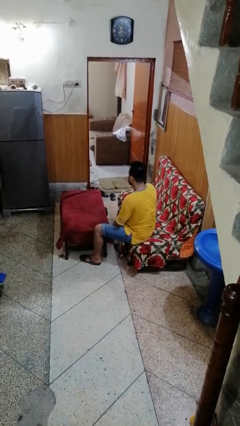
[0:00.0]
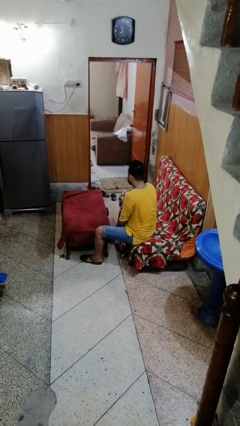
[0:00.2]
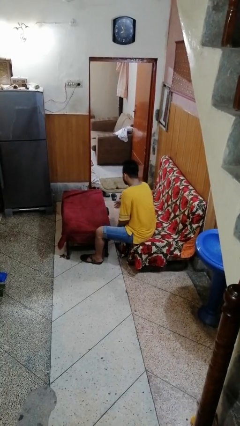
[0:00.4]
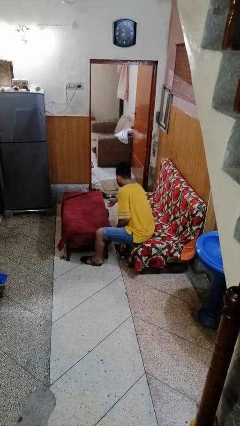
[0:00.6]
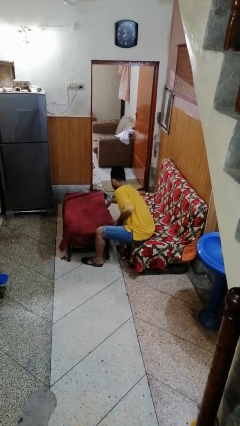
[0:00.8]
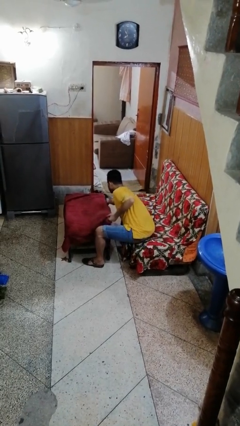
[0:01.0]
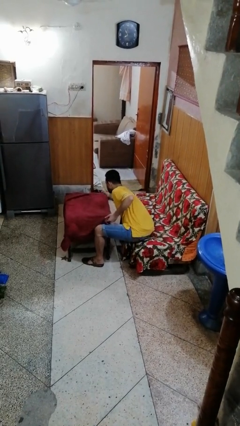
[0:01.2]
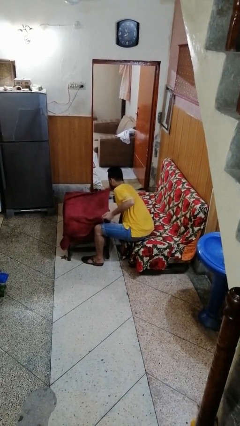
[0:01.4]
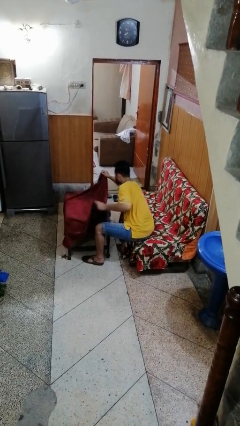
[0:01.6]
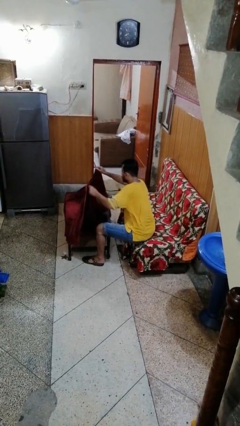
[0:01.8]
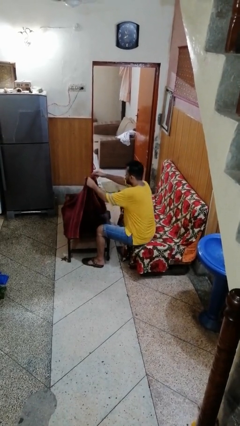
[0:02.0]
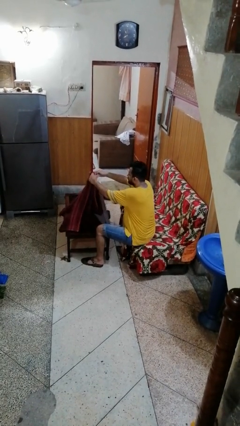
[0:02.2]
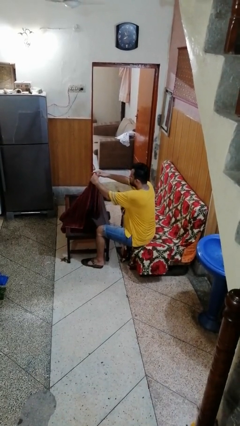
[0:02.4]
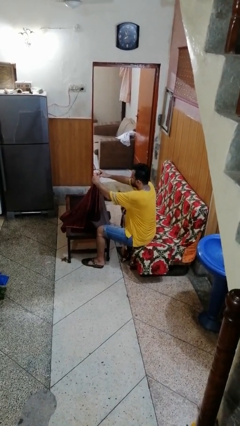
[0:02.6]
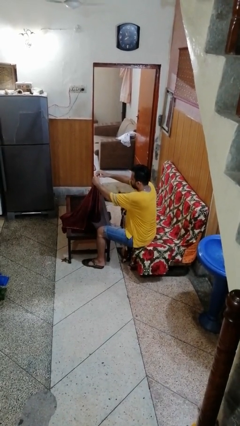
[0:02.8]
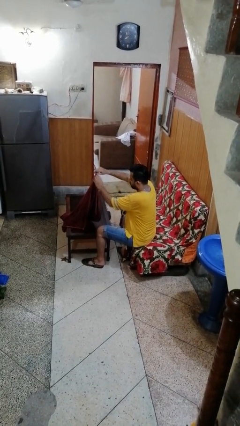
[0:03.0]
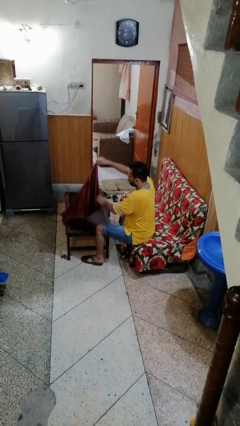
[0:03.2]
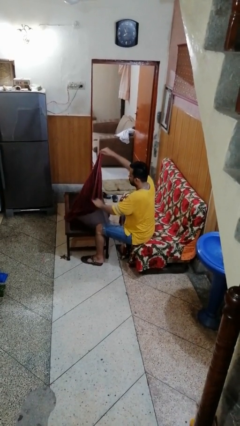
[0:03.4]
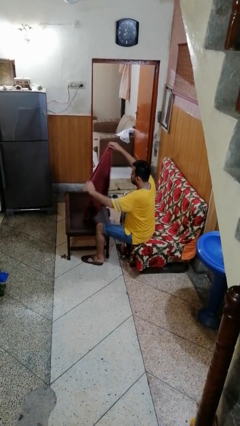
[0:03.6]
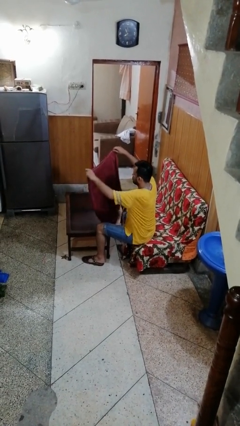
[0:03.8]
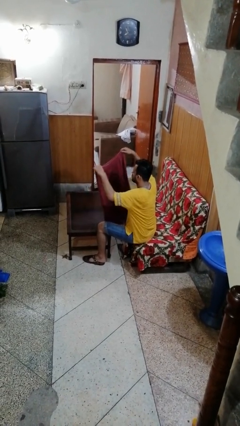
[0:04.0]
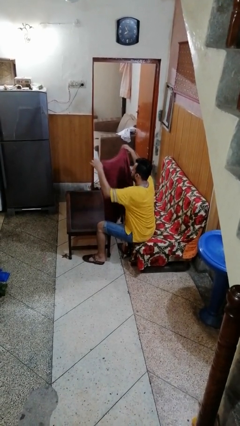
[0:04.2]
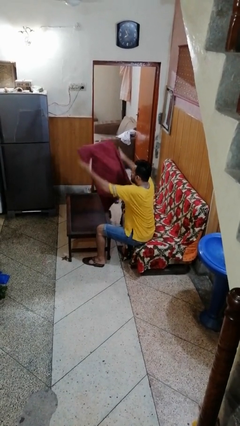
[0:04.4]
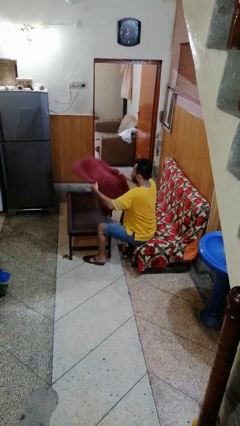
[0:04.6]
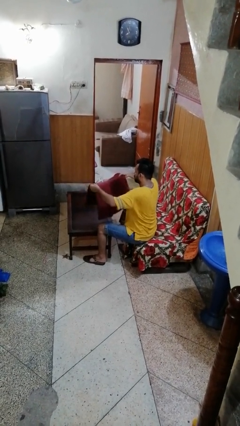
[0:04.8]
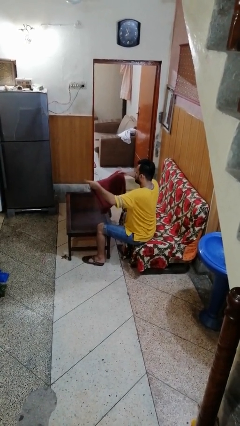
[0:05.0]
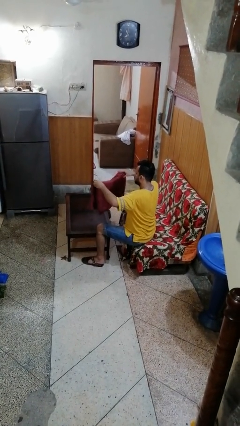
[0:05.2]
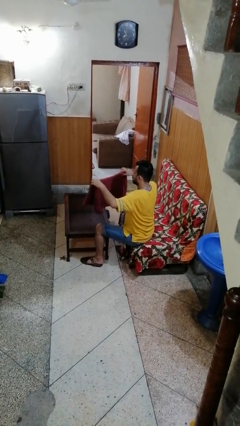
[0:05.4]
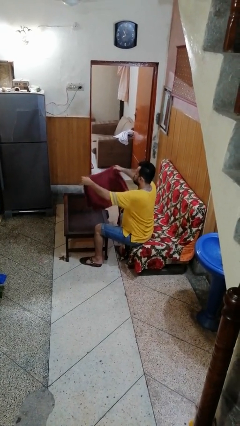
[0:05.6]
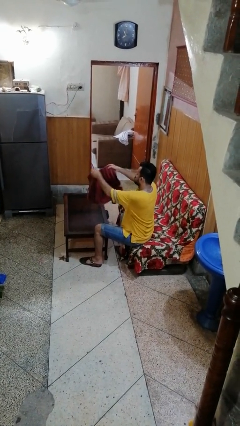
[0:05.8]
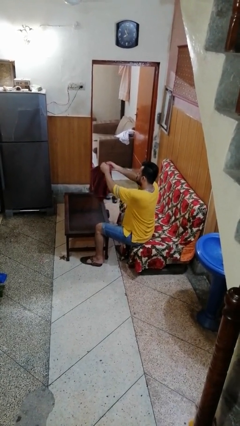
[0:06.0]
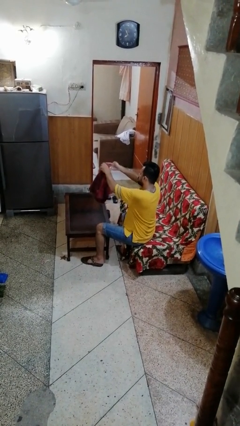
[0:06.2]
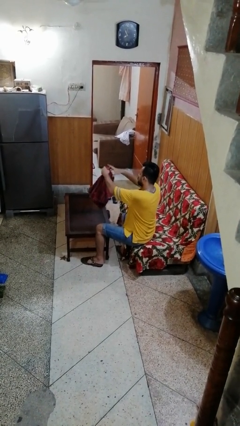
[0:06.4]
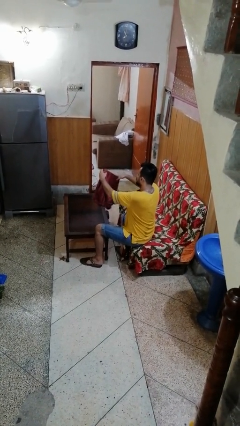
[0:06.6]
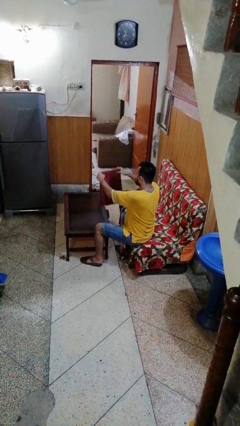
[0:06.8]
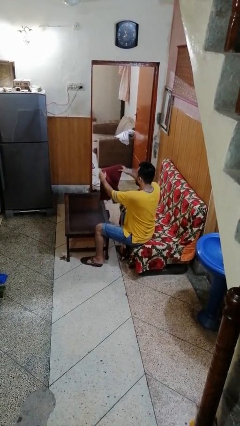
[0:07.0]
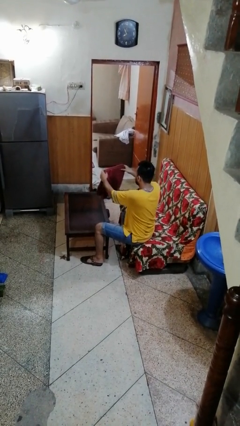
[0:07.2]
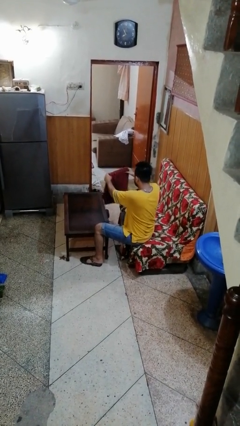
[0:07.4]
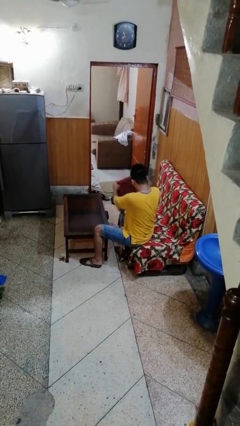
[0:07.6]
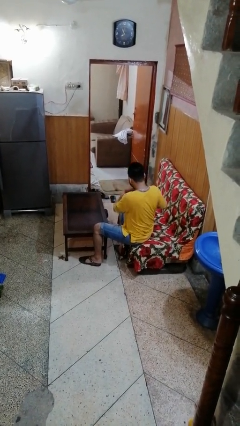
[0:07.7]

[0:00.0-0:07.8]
person folds tablecloth

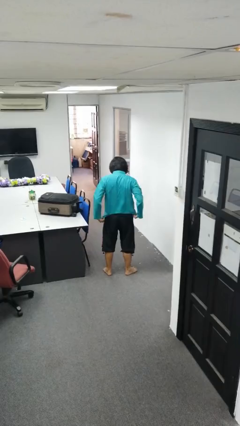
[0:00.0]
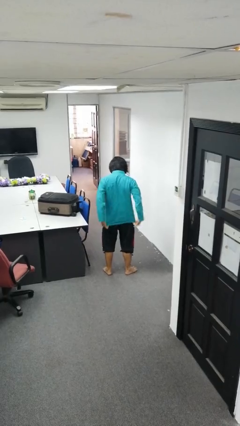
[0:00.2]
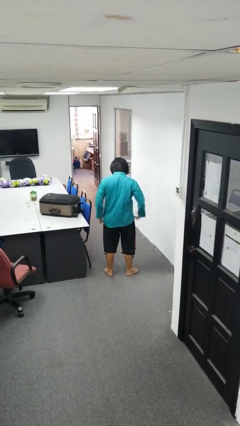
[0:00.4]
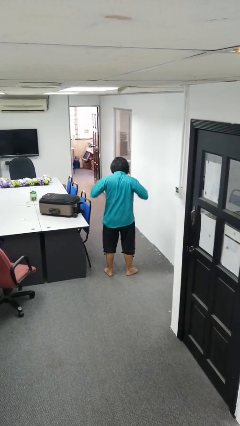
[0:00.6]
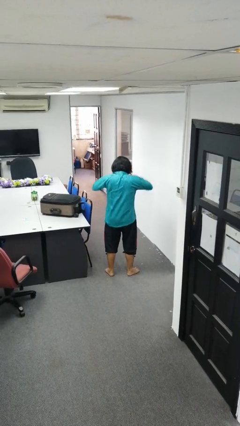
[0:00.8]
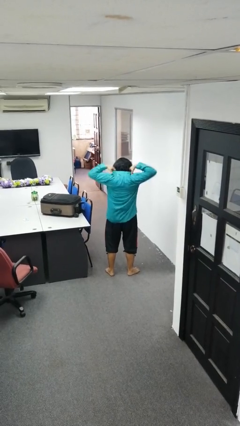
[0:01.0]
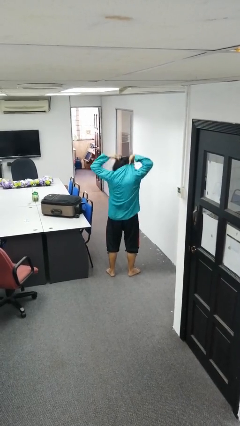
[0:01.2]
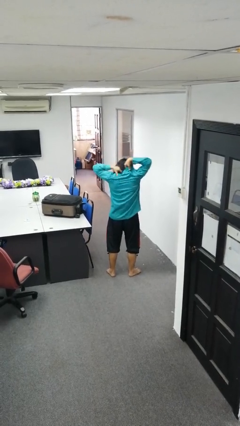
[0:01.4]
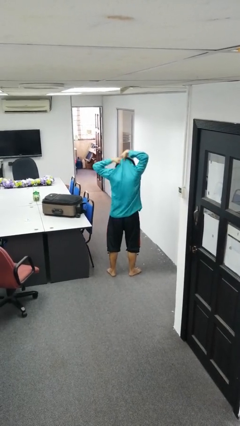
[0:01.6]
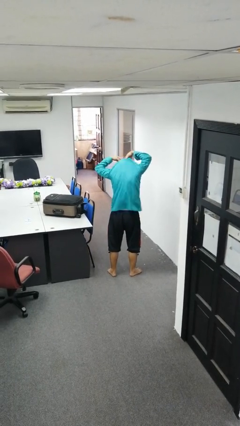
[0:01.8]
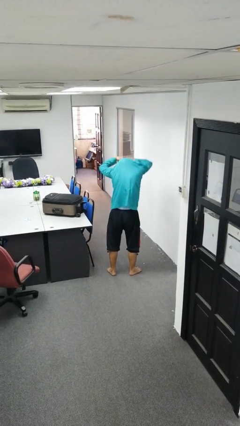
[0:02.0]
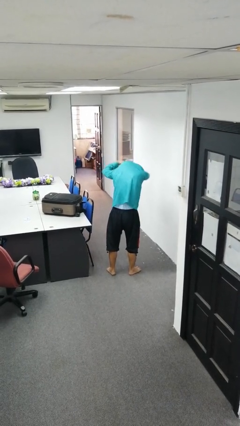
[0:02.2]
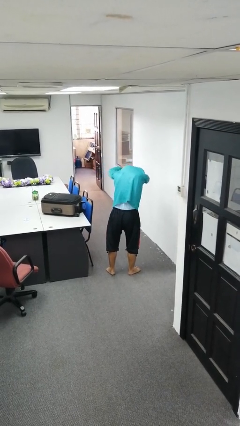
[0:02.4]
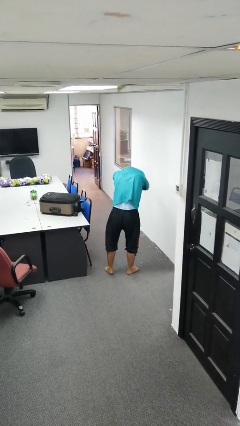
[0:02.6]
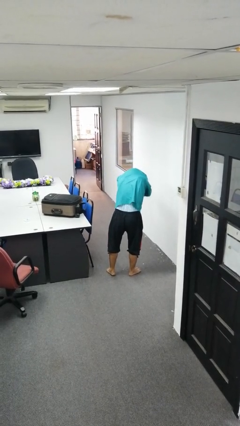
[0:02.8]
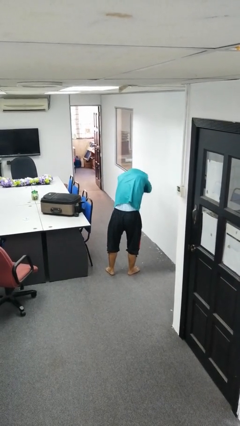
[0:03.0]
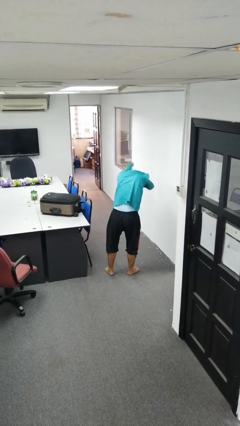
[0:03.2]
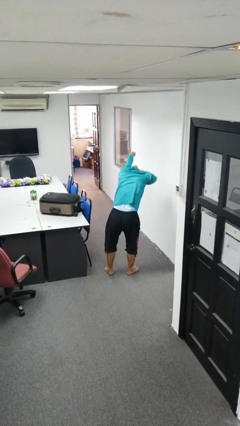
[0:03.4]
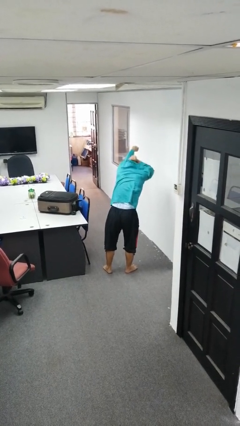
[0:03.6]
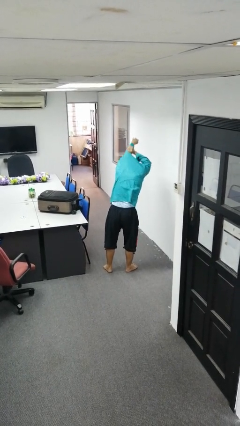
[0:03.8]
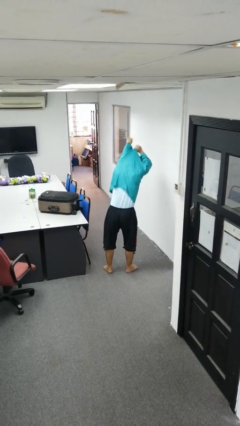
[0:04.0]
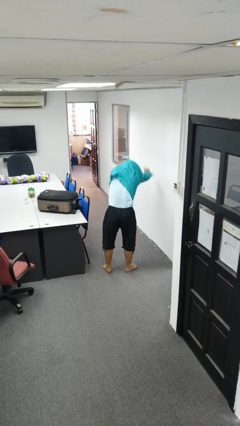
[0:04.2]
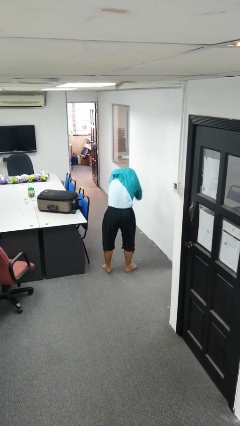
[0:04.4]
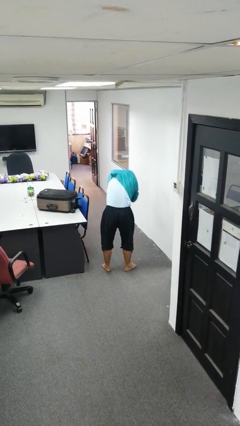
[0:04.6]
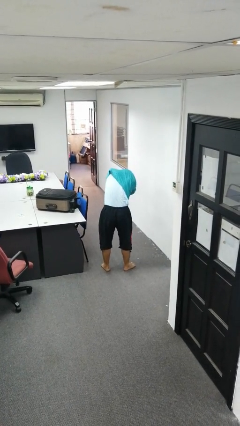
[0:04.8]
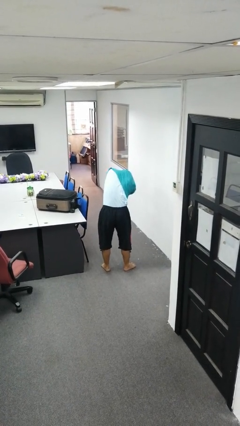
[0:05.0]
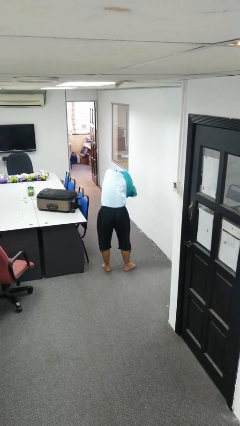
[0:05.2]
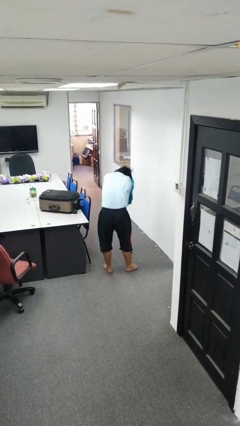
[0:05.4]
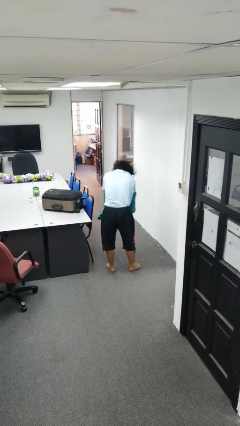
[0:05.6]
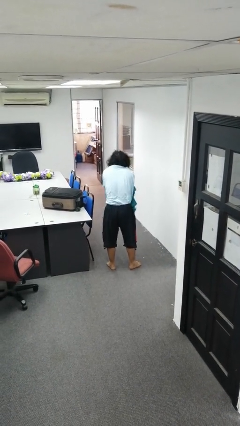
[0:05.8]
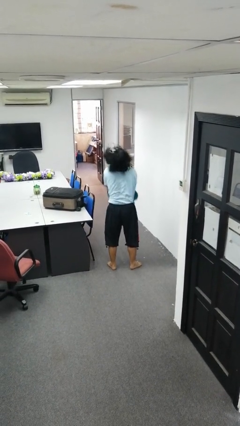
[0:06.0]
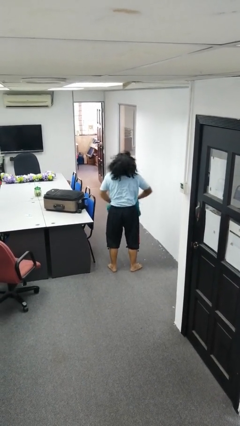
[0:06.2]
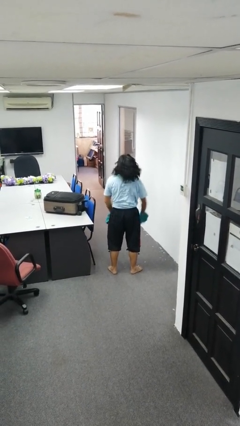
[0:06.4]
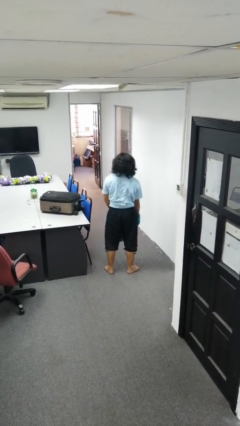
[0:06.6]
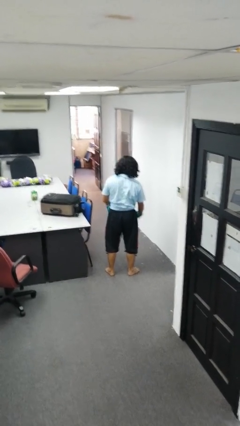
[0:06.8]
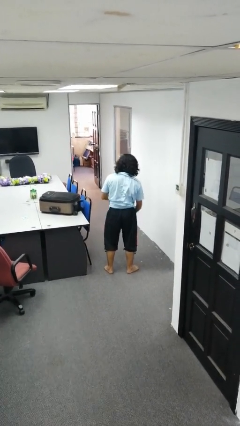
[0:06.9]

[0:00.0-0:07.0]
person takes off shirt

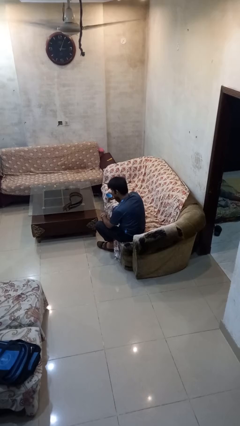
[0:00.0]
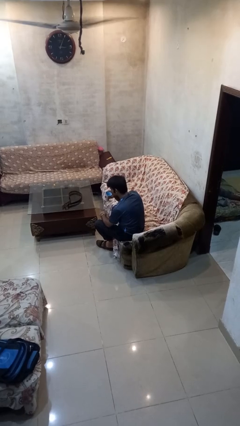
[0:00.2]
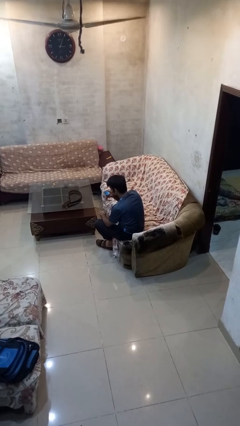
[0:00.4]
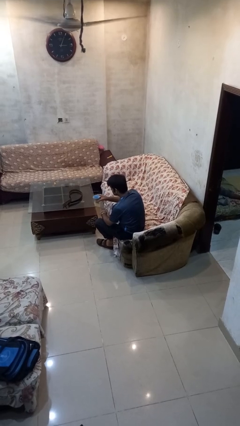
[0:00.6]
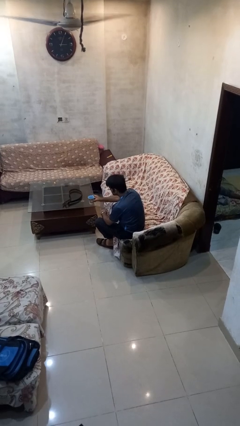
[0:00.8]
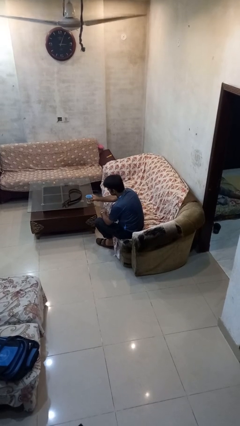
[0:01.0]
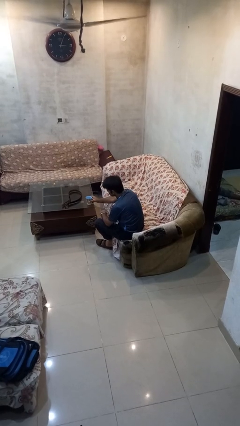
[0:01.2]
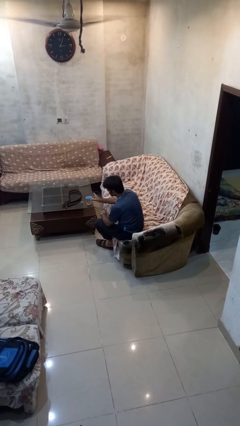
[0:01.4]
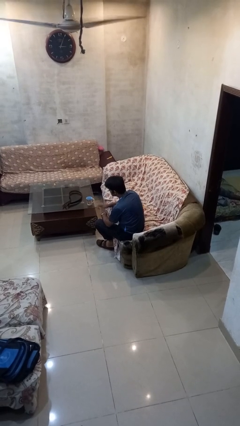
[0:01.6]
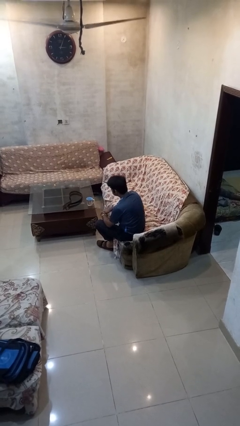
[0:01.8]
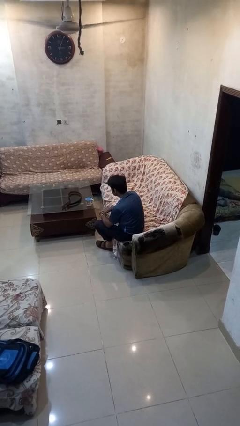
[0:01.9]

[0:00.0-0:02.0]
person puts down object on table

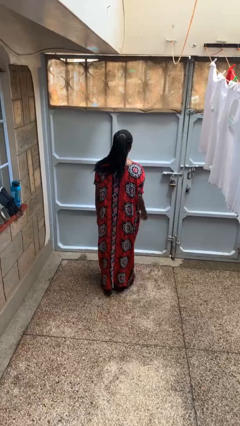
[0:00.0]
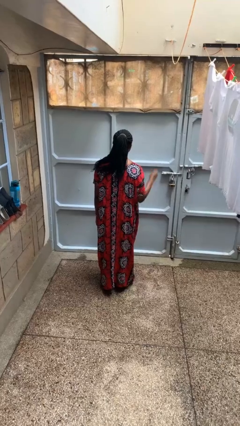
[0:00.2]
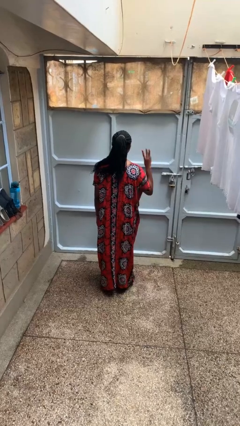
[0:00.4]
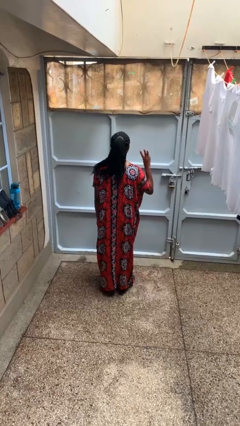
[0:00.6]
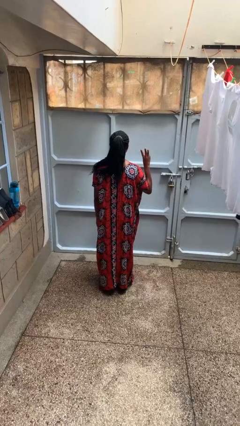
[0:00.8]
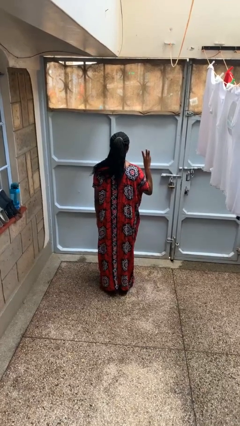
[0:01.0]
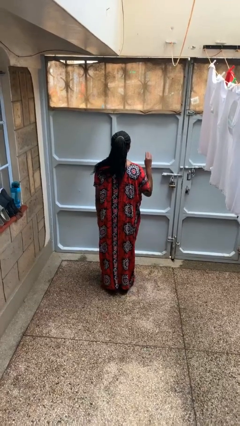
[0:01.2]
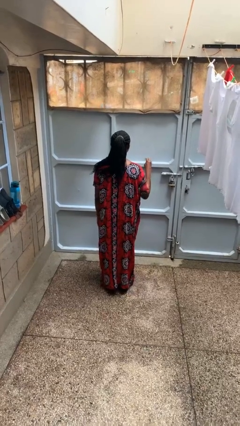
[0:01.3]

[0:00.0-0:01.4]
person gestures number three
